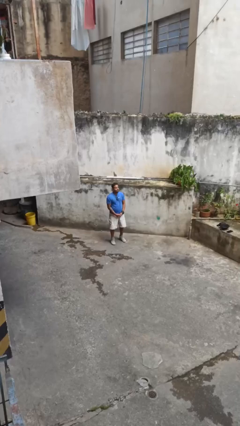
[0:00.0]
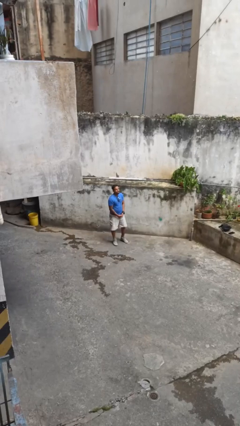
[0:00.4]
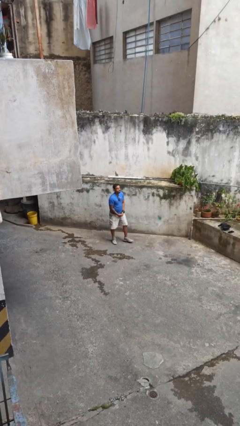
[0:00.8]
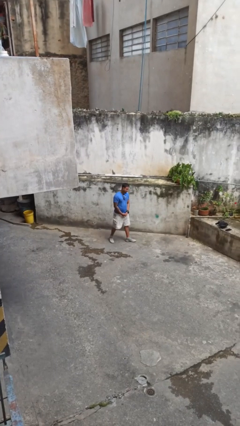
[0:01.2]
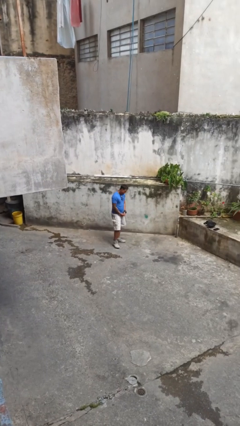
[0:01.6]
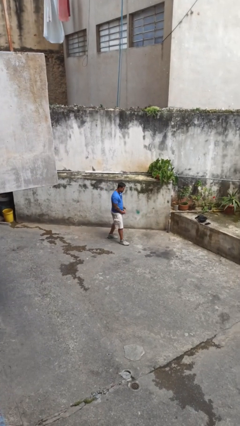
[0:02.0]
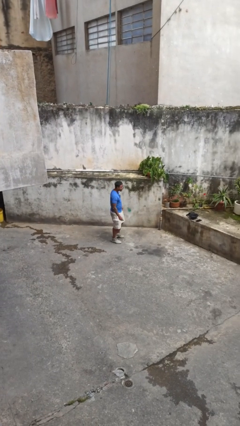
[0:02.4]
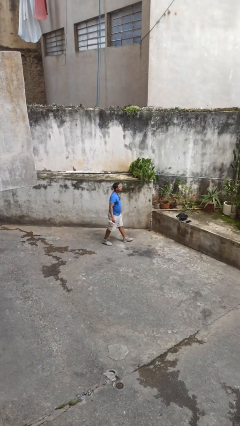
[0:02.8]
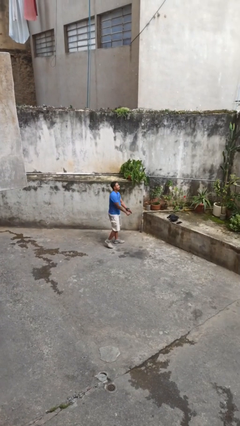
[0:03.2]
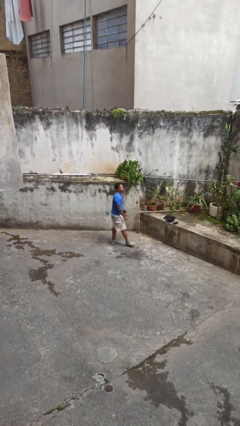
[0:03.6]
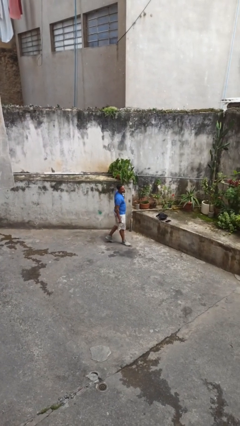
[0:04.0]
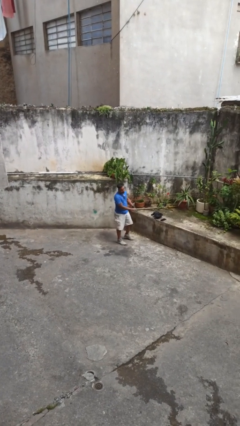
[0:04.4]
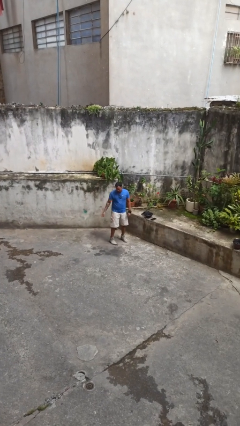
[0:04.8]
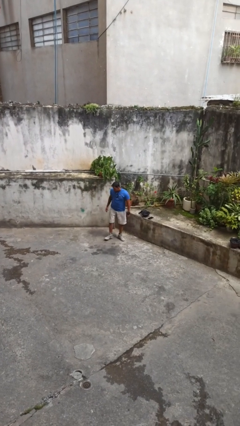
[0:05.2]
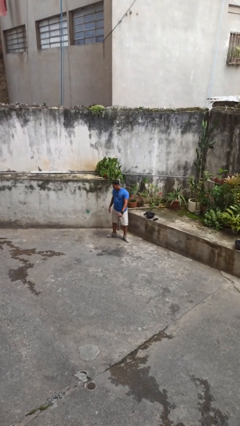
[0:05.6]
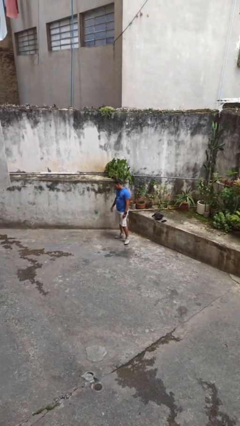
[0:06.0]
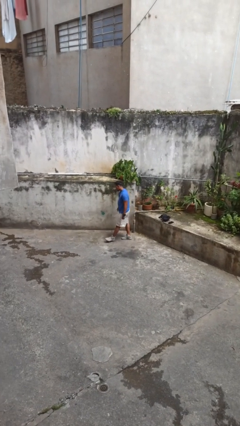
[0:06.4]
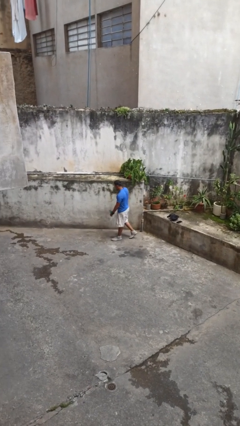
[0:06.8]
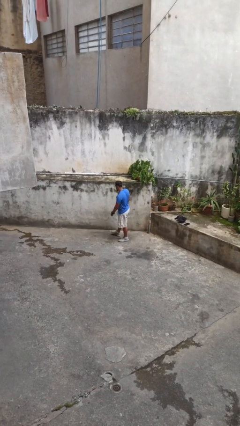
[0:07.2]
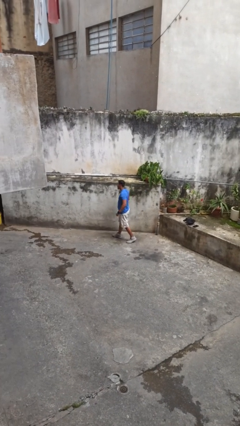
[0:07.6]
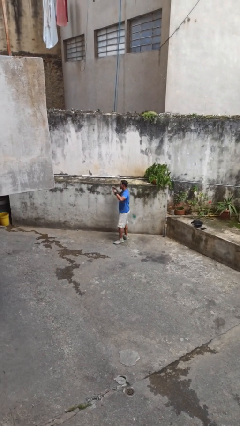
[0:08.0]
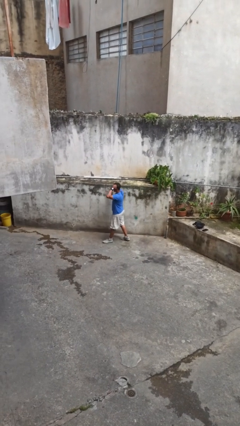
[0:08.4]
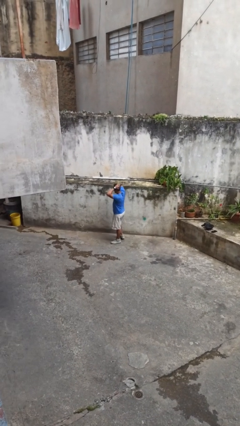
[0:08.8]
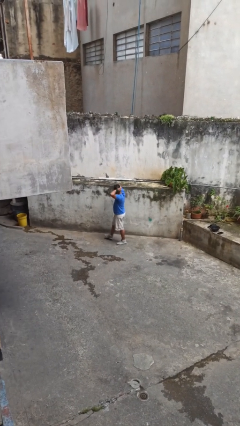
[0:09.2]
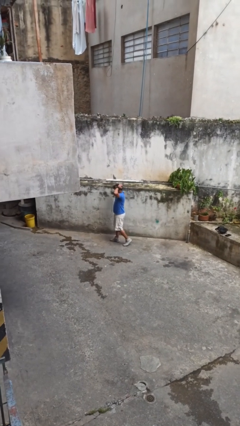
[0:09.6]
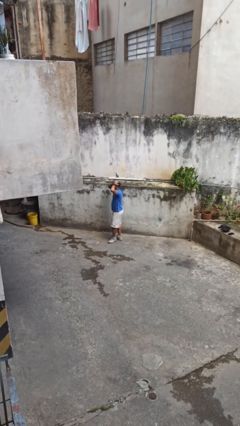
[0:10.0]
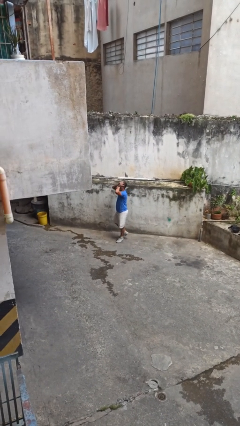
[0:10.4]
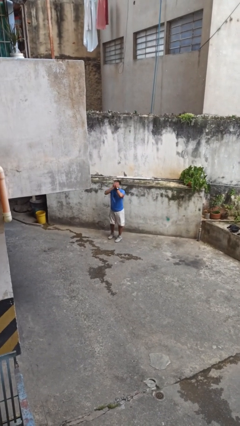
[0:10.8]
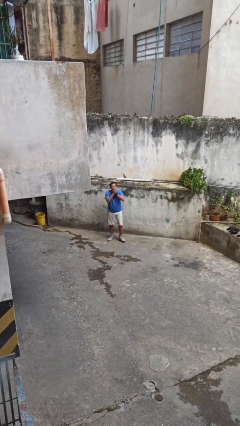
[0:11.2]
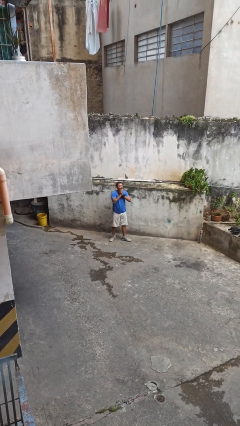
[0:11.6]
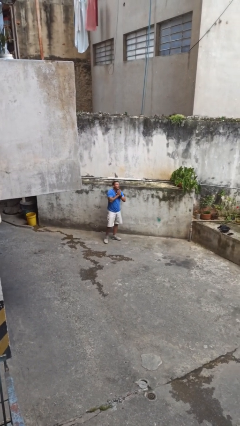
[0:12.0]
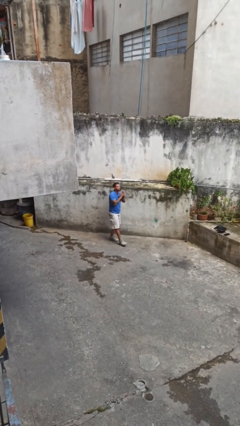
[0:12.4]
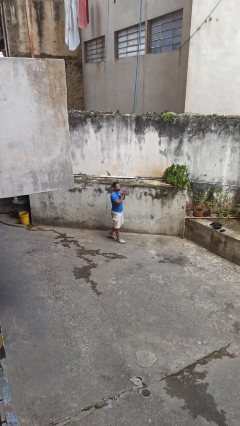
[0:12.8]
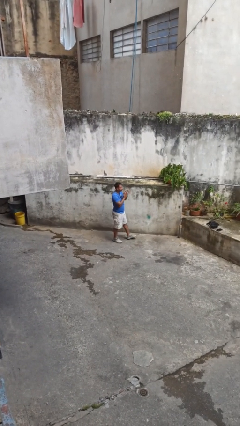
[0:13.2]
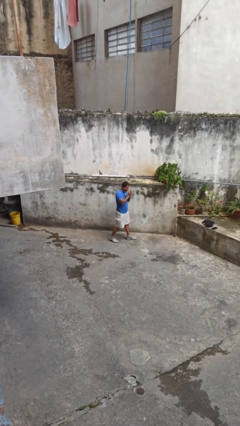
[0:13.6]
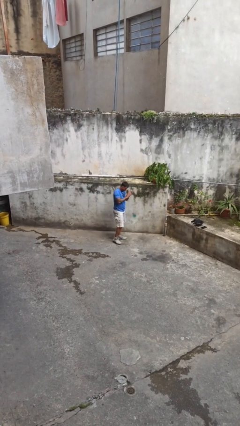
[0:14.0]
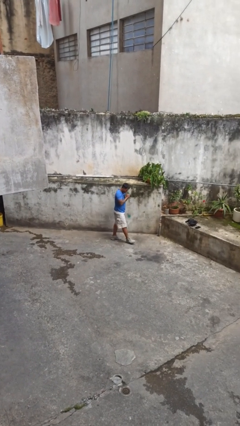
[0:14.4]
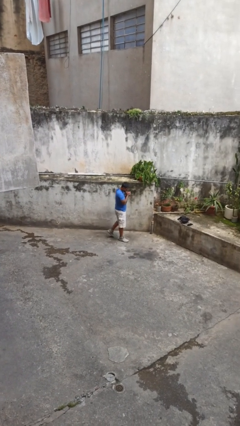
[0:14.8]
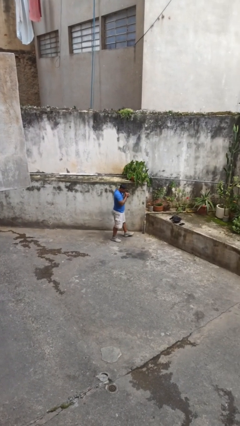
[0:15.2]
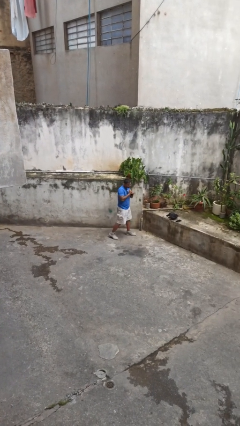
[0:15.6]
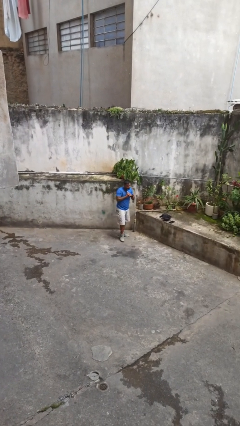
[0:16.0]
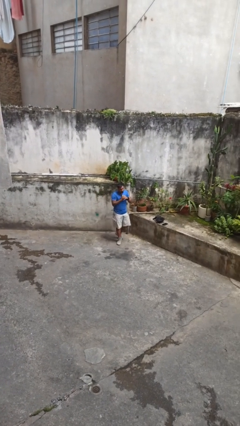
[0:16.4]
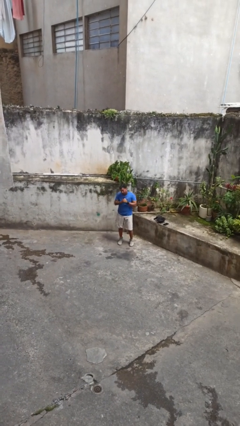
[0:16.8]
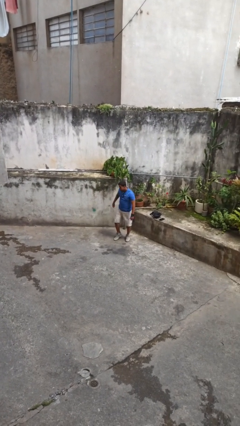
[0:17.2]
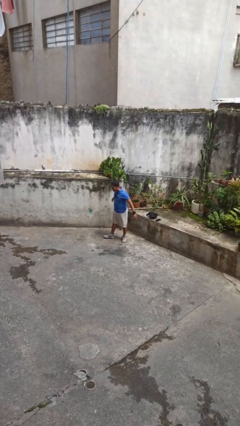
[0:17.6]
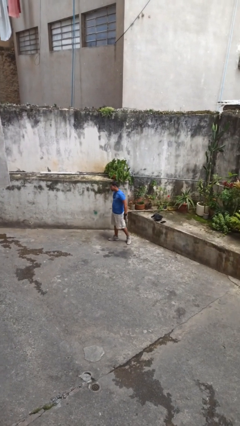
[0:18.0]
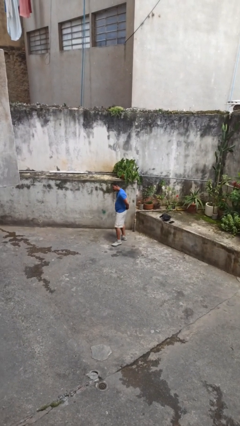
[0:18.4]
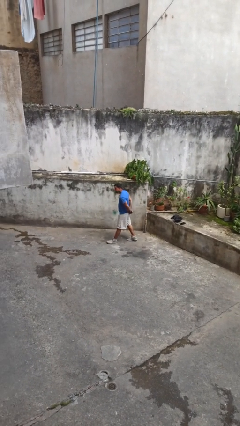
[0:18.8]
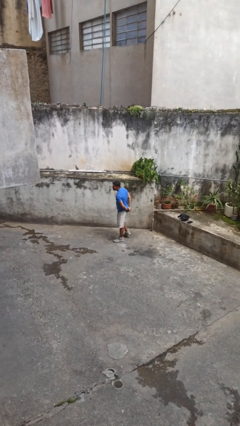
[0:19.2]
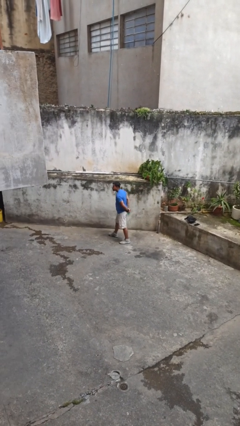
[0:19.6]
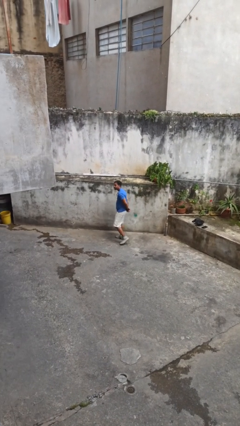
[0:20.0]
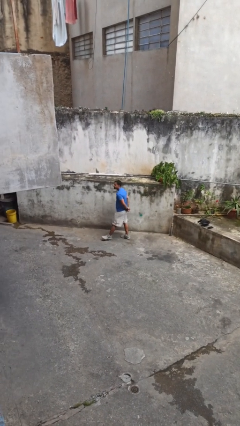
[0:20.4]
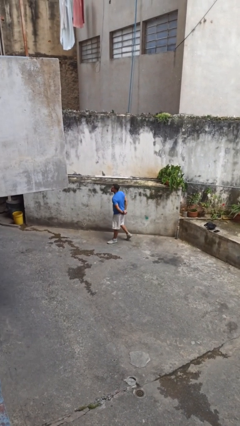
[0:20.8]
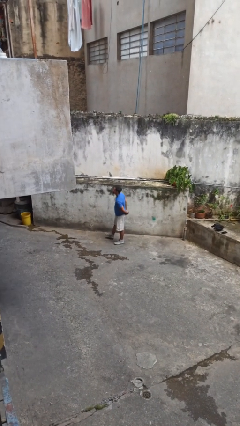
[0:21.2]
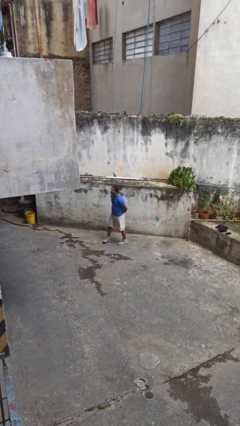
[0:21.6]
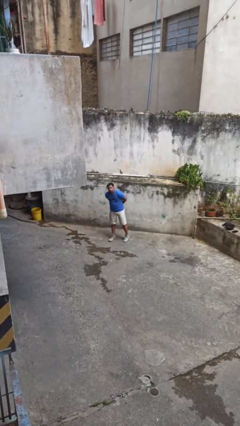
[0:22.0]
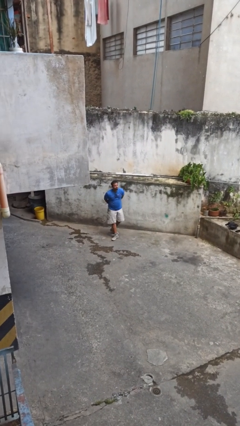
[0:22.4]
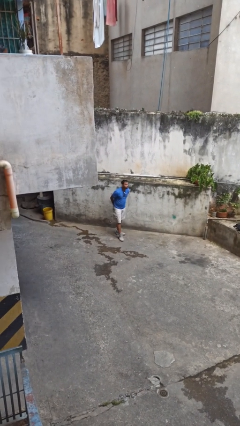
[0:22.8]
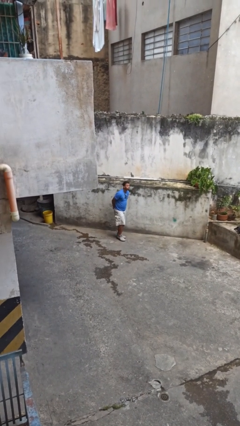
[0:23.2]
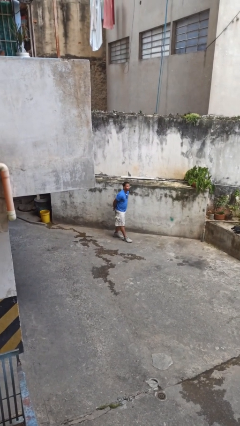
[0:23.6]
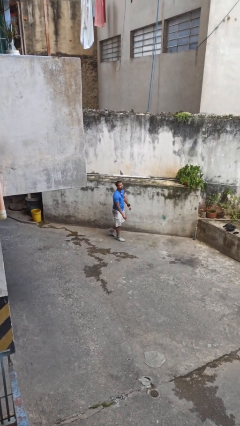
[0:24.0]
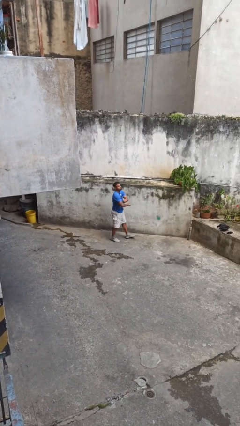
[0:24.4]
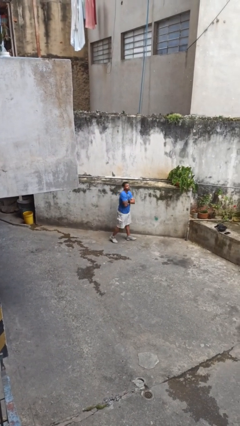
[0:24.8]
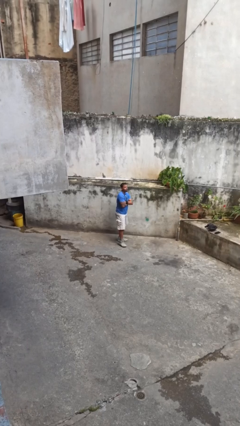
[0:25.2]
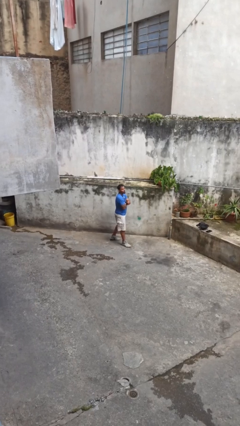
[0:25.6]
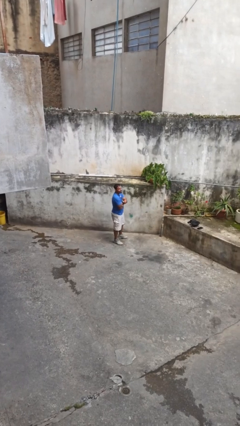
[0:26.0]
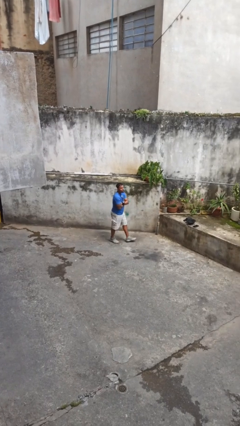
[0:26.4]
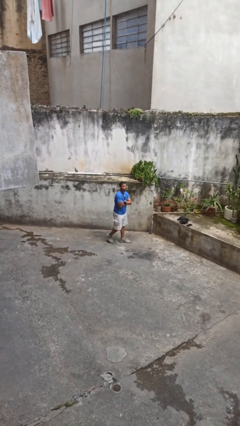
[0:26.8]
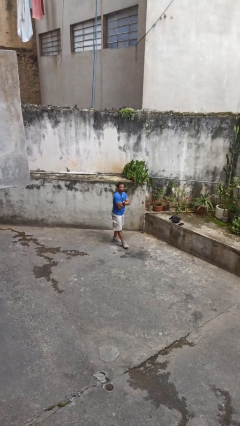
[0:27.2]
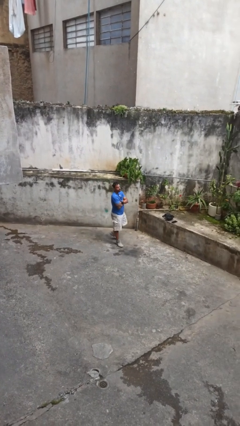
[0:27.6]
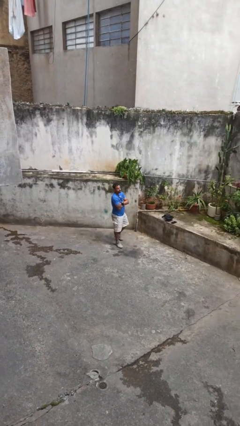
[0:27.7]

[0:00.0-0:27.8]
person walks

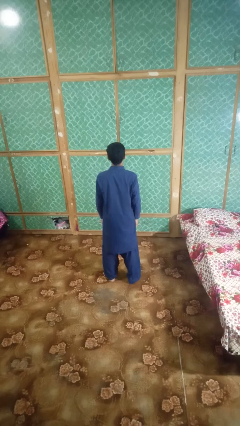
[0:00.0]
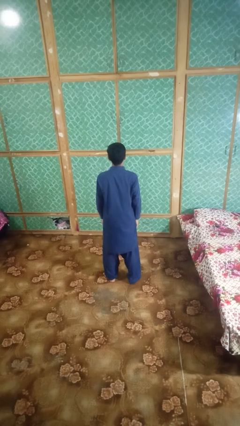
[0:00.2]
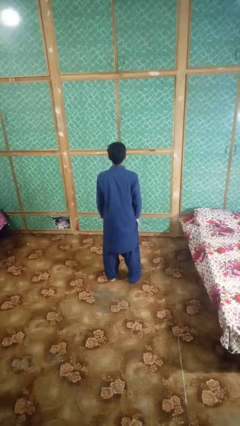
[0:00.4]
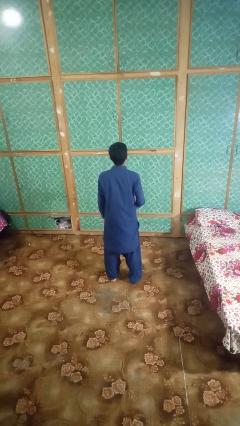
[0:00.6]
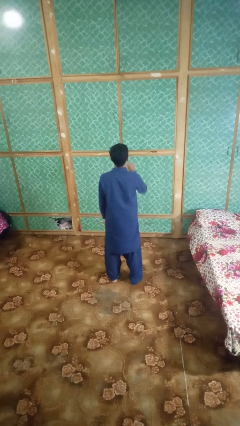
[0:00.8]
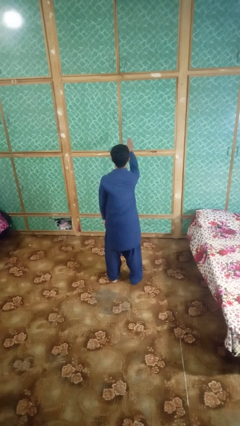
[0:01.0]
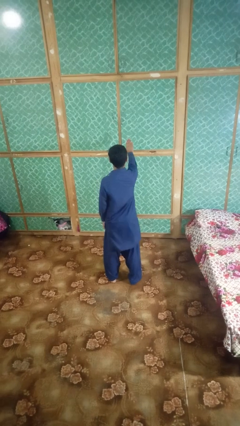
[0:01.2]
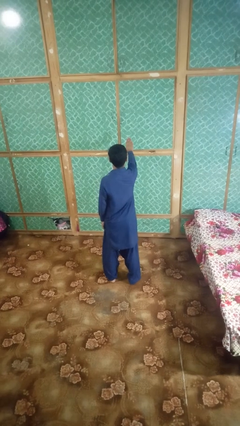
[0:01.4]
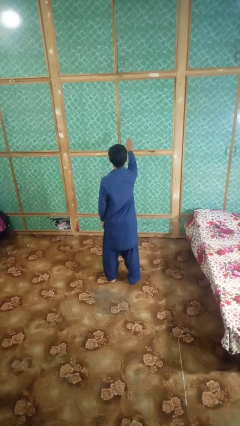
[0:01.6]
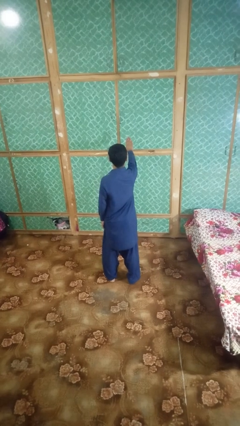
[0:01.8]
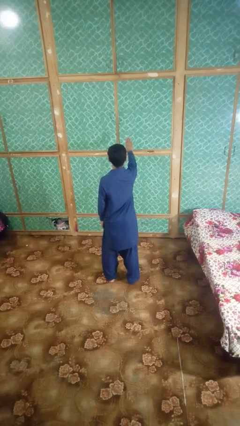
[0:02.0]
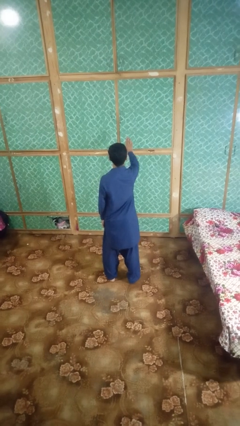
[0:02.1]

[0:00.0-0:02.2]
person gestures stop

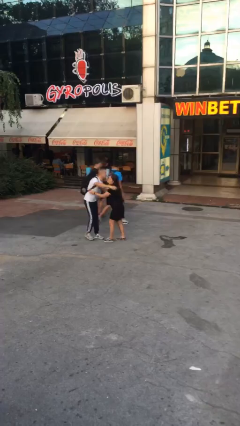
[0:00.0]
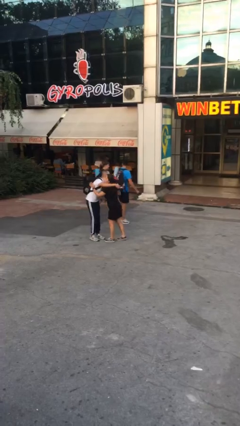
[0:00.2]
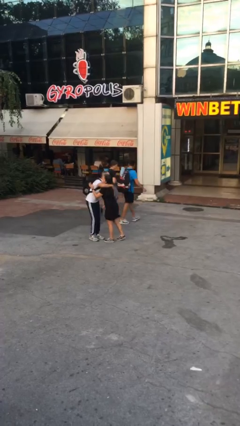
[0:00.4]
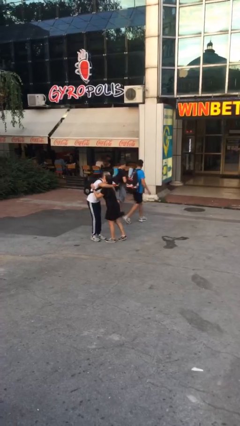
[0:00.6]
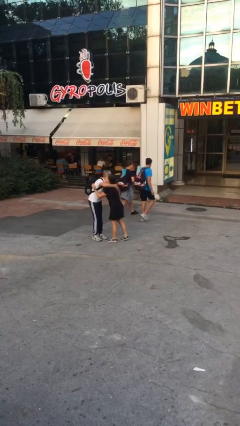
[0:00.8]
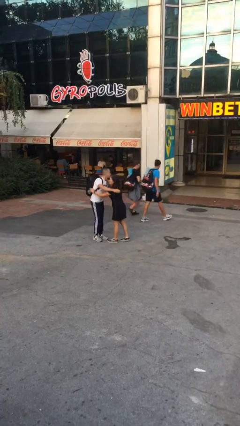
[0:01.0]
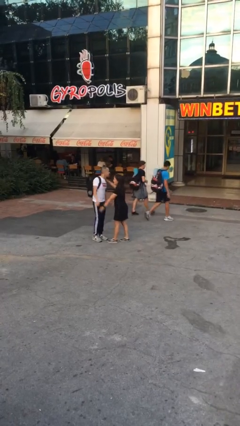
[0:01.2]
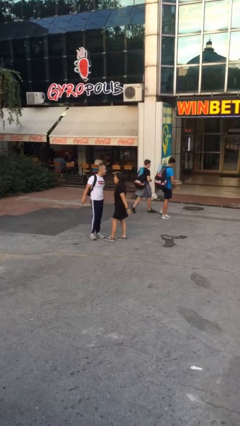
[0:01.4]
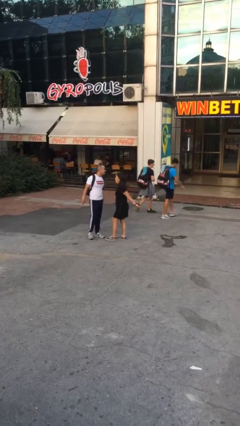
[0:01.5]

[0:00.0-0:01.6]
person embraces person
